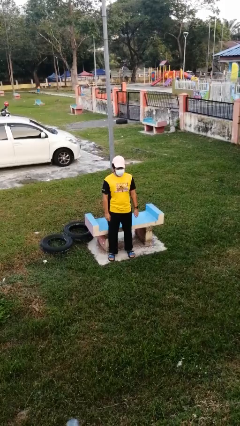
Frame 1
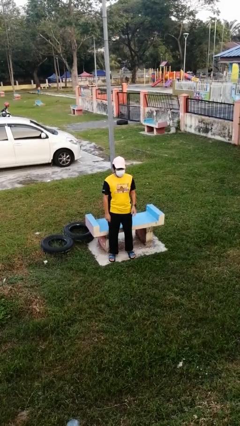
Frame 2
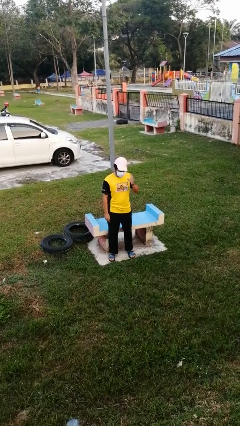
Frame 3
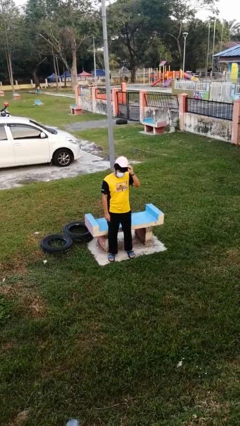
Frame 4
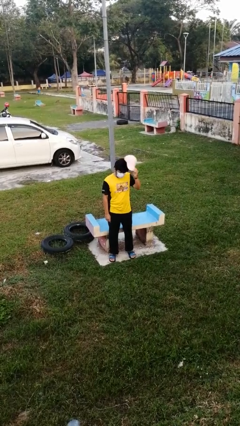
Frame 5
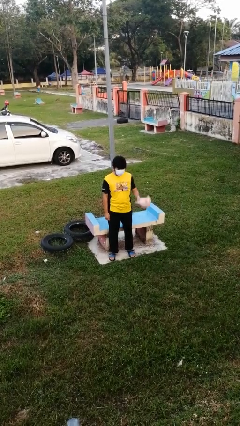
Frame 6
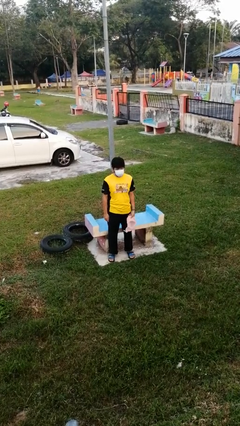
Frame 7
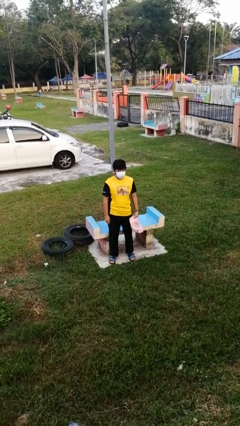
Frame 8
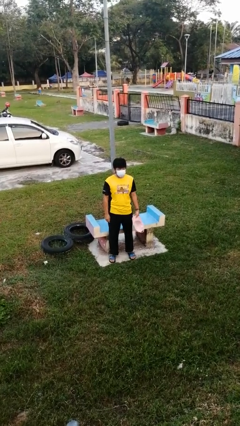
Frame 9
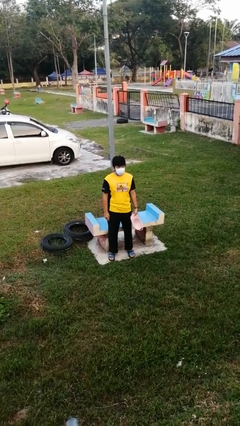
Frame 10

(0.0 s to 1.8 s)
person takes off hat

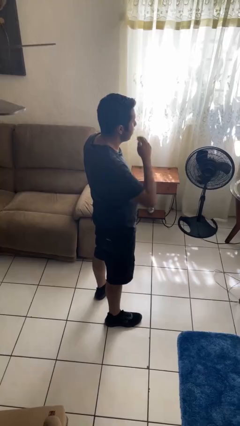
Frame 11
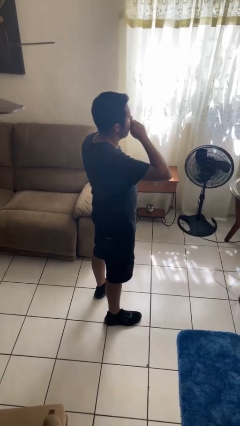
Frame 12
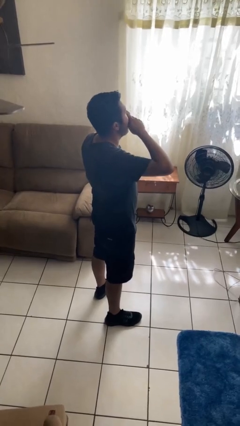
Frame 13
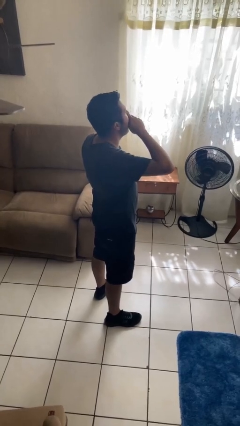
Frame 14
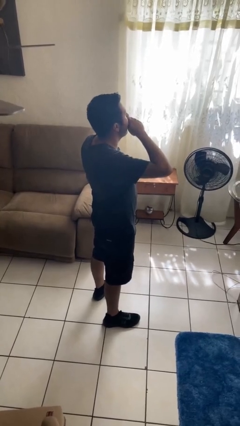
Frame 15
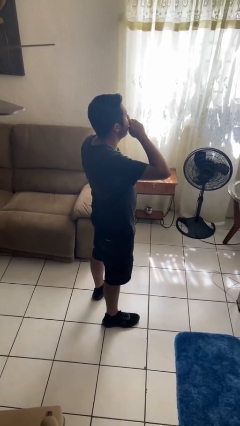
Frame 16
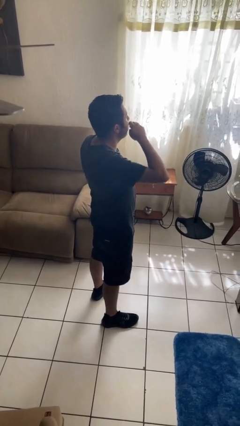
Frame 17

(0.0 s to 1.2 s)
person yawns

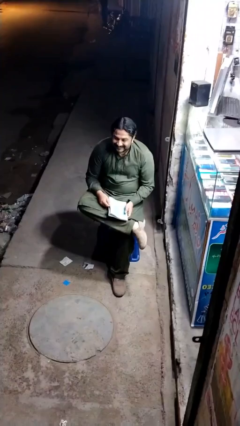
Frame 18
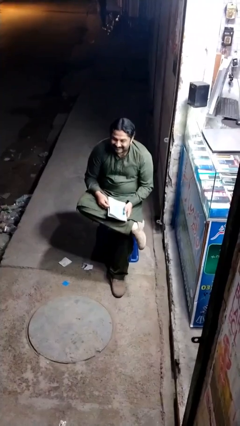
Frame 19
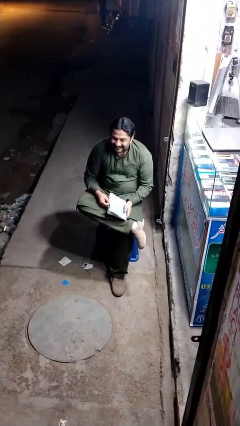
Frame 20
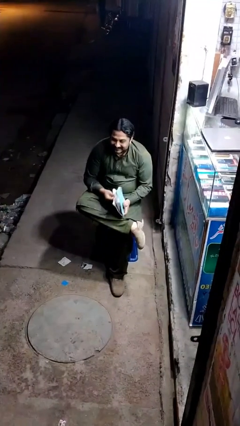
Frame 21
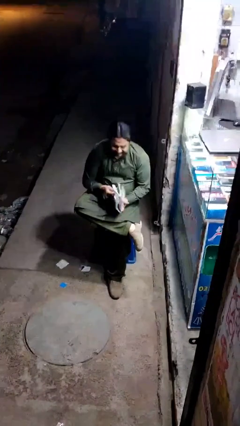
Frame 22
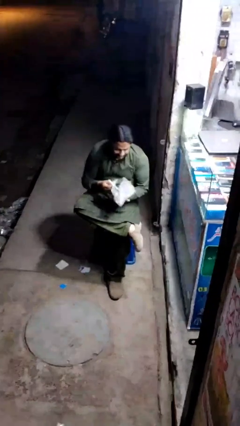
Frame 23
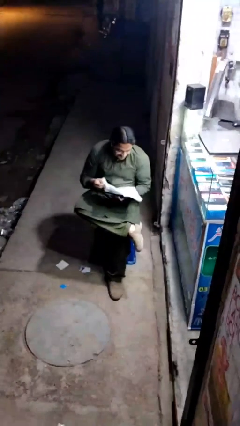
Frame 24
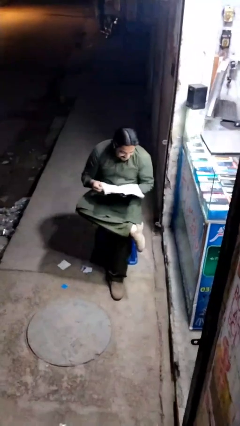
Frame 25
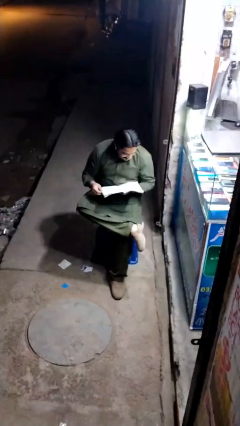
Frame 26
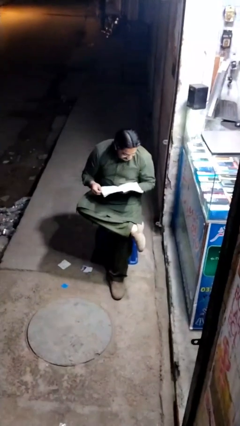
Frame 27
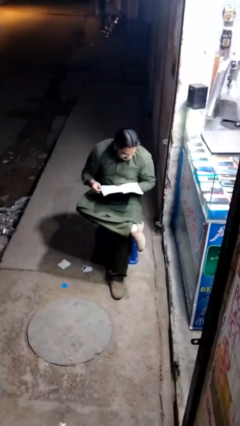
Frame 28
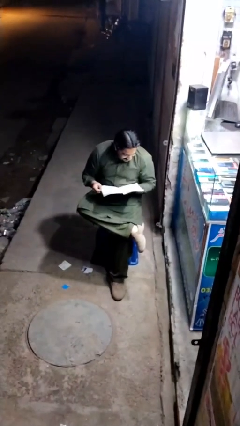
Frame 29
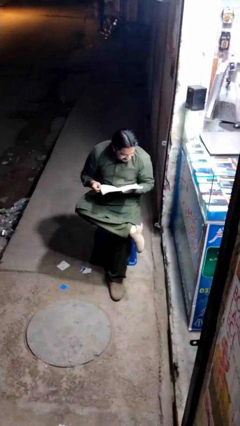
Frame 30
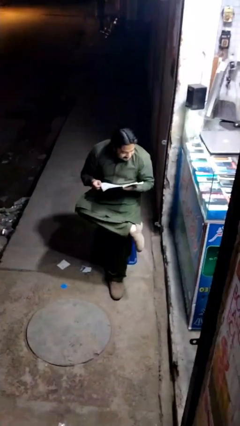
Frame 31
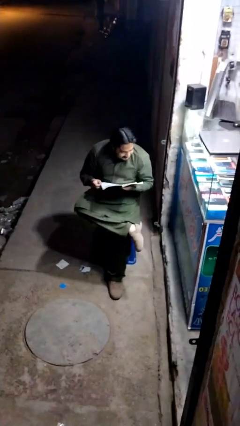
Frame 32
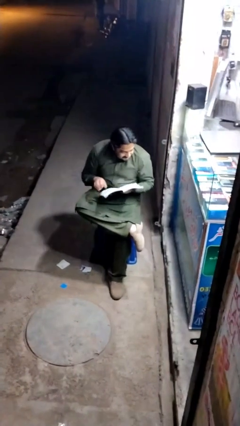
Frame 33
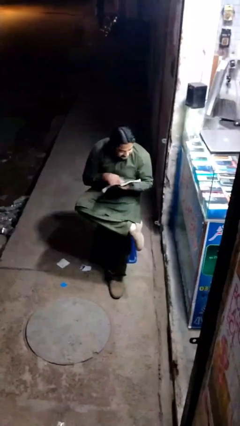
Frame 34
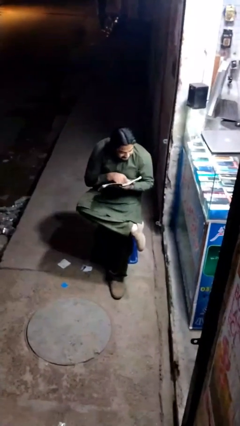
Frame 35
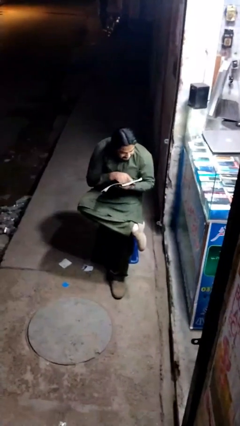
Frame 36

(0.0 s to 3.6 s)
person reads document

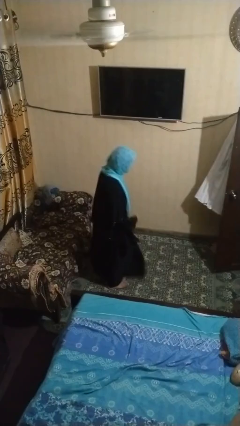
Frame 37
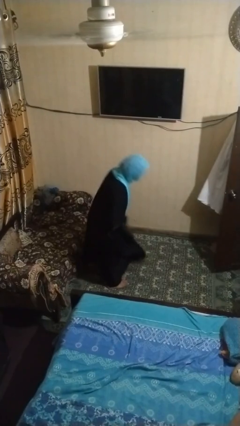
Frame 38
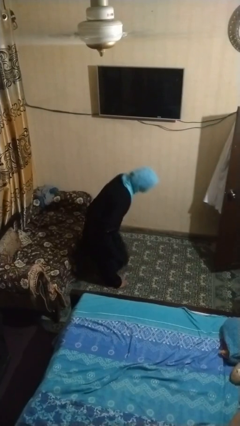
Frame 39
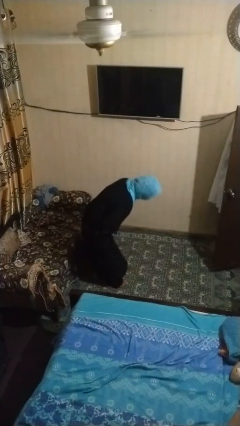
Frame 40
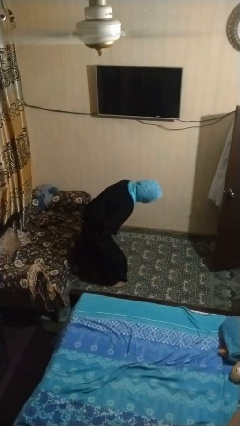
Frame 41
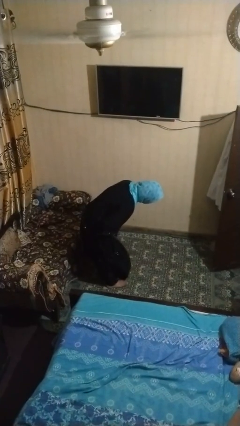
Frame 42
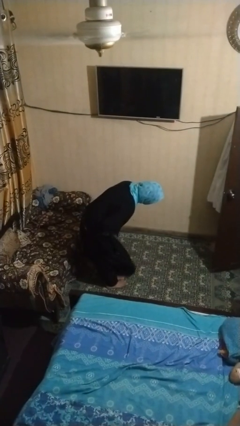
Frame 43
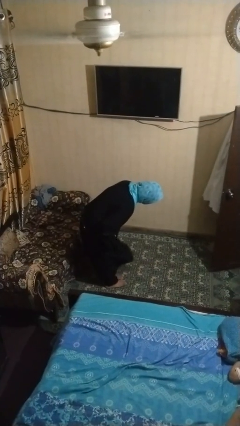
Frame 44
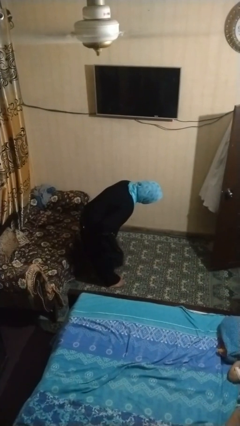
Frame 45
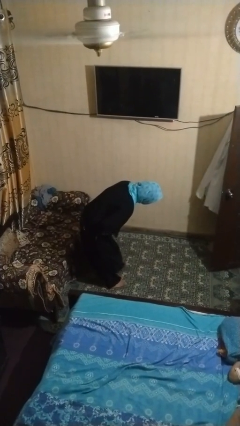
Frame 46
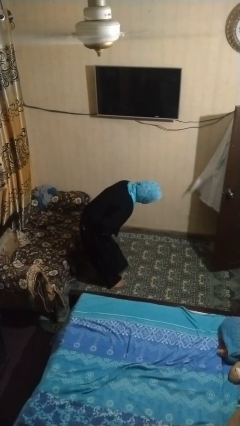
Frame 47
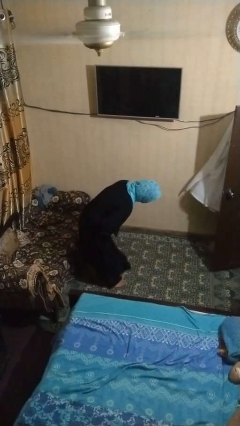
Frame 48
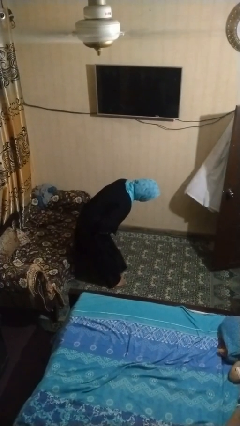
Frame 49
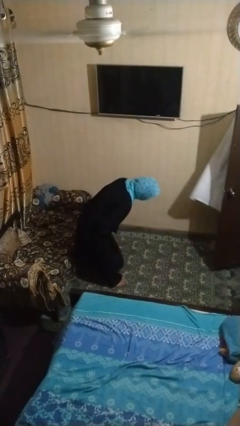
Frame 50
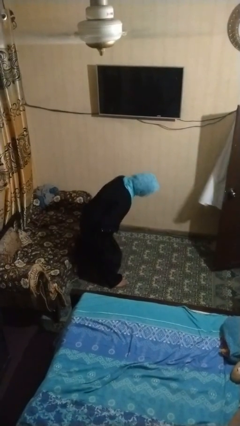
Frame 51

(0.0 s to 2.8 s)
person bows

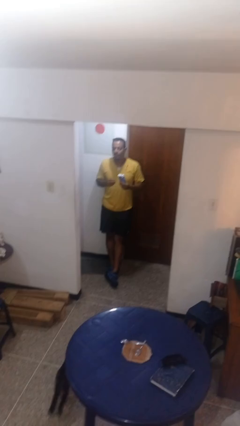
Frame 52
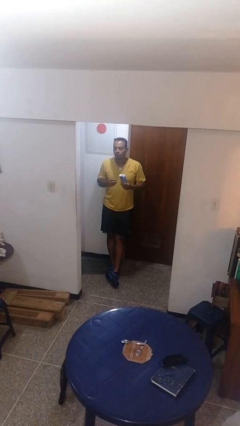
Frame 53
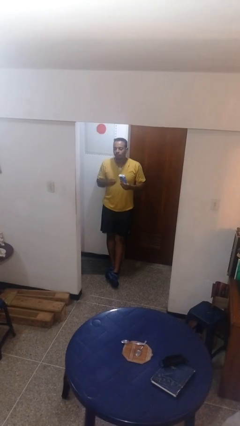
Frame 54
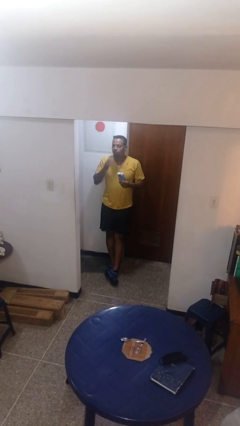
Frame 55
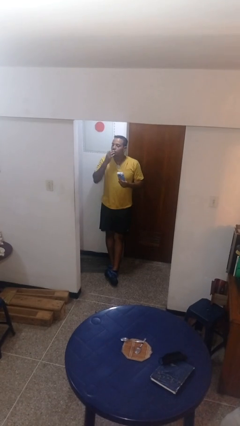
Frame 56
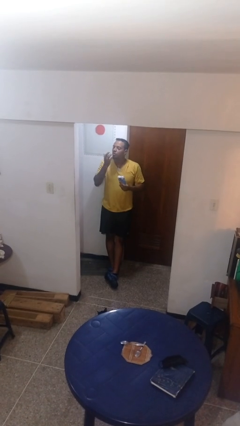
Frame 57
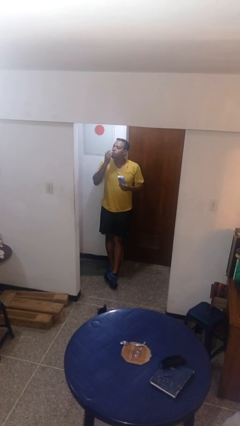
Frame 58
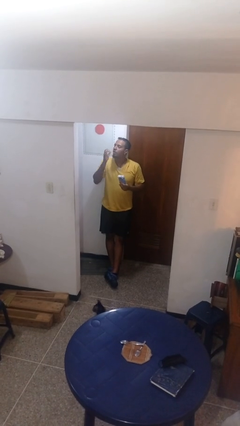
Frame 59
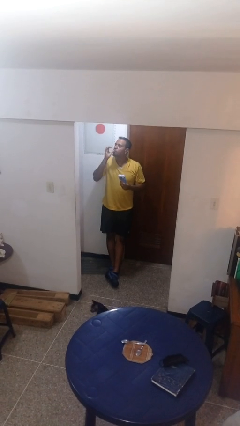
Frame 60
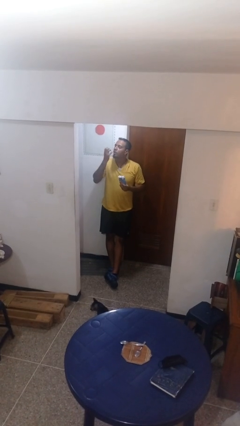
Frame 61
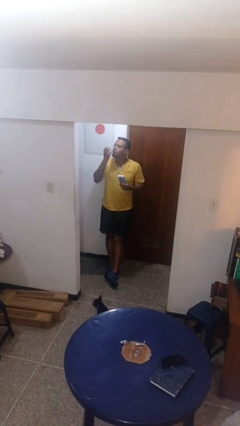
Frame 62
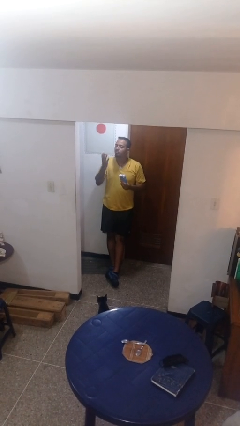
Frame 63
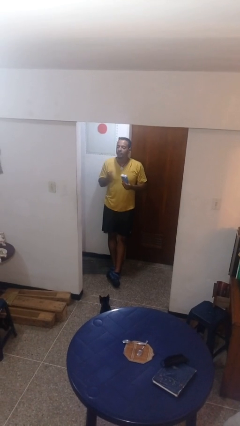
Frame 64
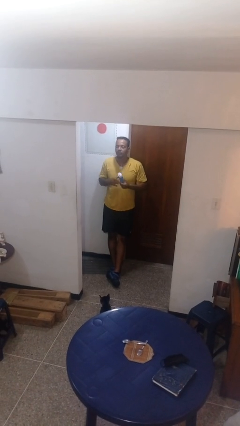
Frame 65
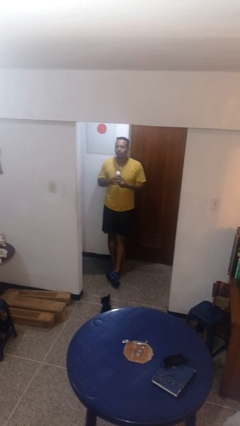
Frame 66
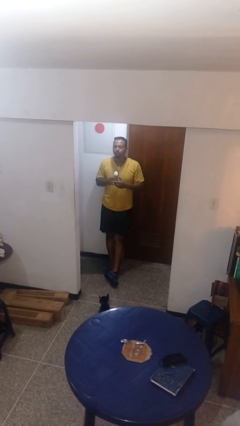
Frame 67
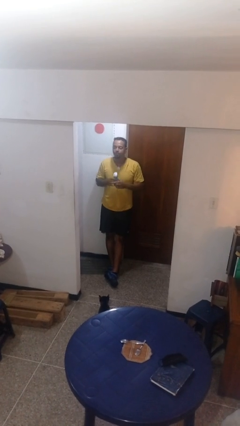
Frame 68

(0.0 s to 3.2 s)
person licks fingers

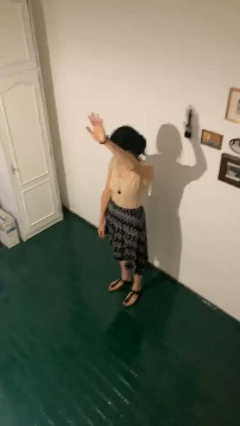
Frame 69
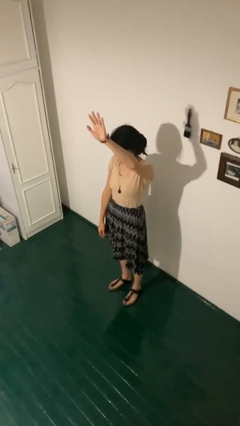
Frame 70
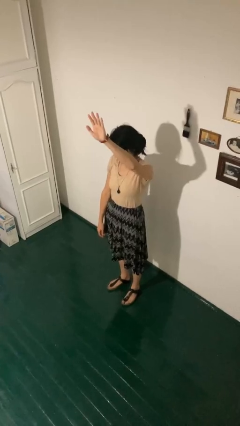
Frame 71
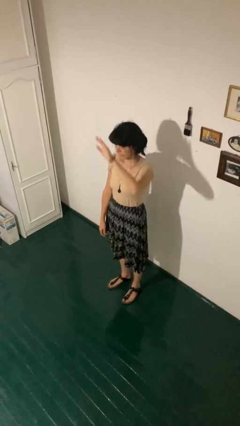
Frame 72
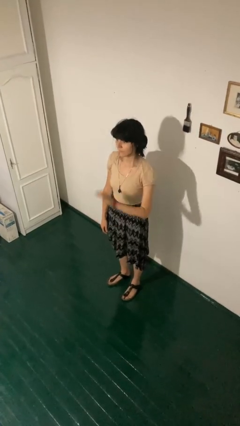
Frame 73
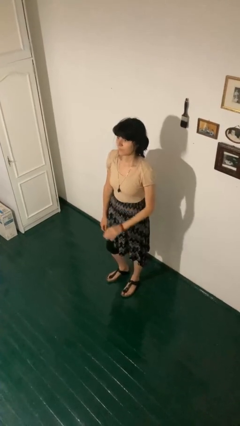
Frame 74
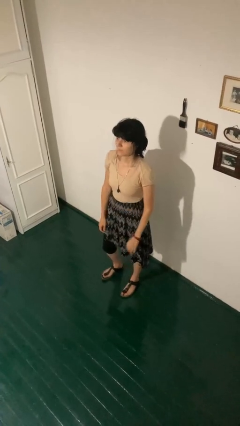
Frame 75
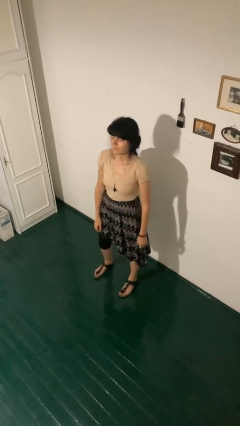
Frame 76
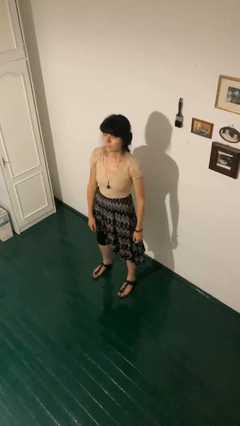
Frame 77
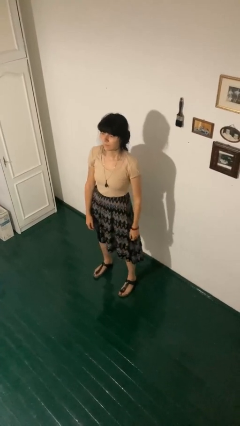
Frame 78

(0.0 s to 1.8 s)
person gestures lower hand

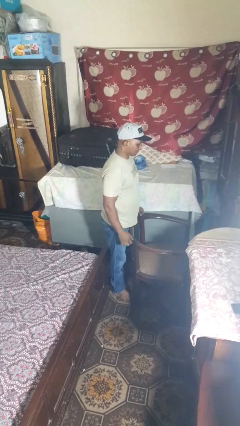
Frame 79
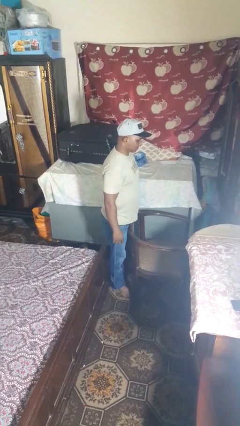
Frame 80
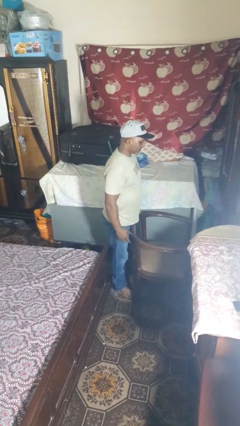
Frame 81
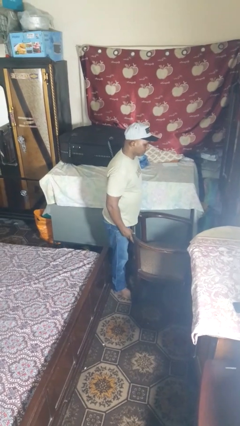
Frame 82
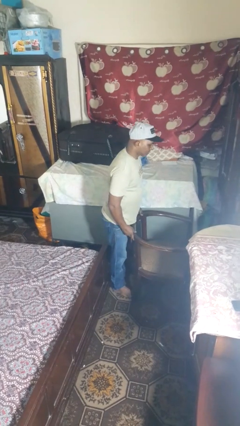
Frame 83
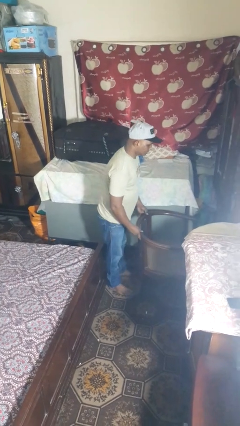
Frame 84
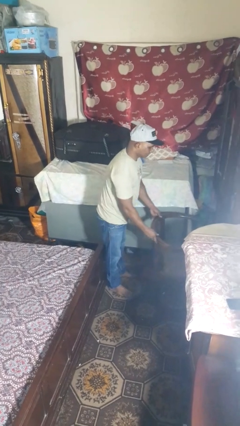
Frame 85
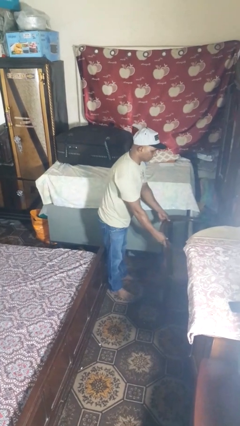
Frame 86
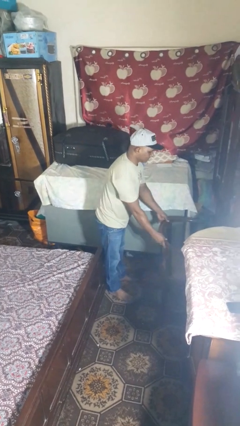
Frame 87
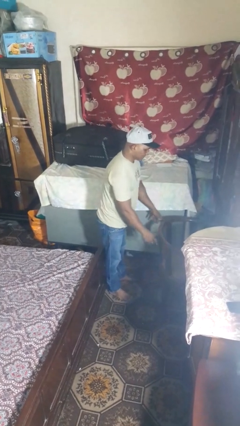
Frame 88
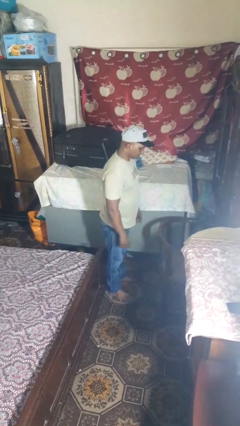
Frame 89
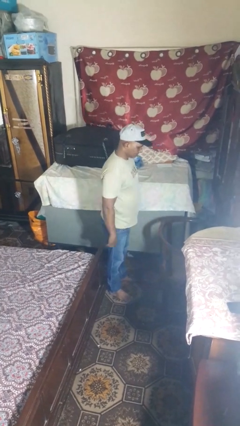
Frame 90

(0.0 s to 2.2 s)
person pushes in chair

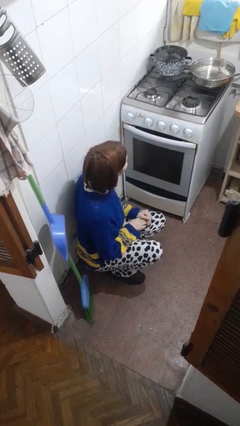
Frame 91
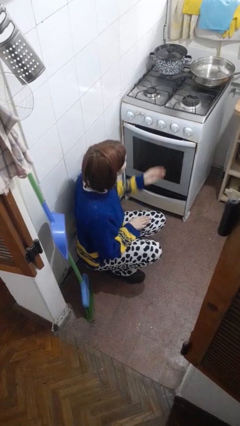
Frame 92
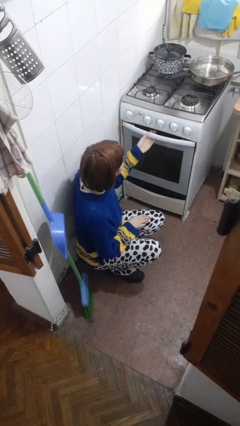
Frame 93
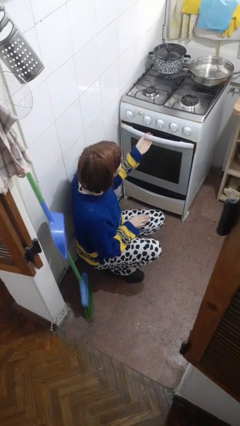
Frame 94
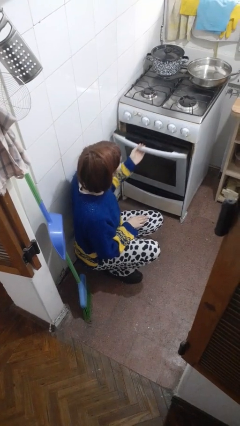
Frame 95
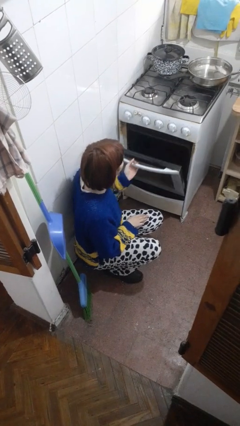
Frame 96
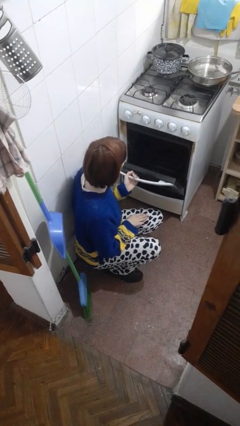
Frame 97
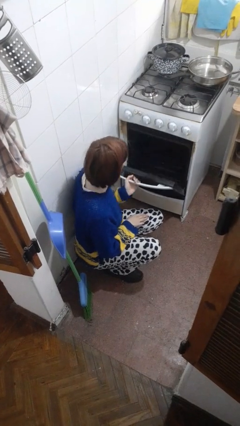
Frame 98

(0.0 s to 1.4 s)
person opens oven door
